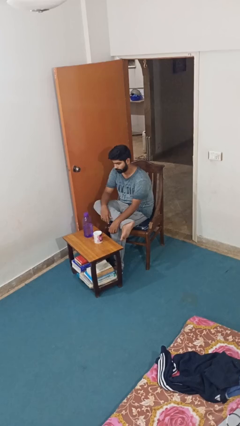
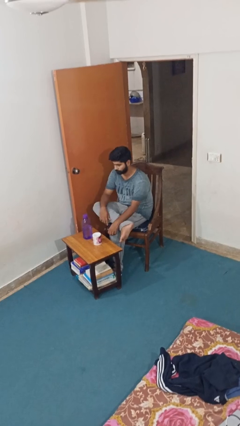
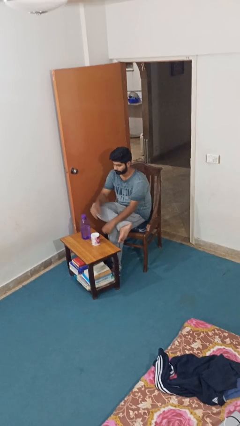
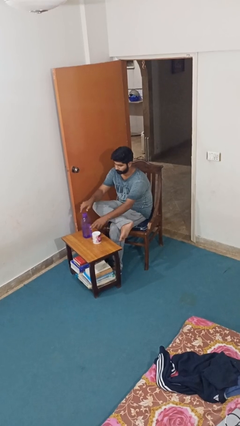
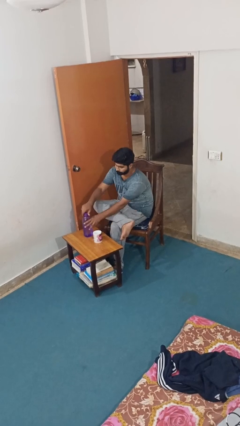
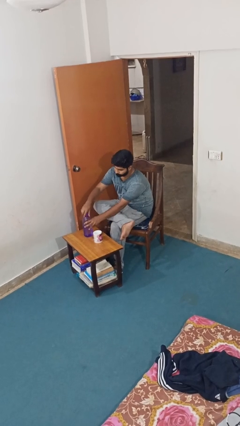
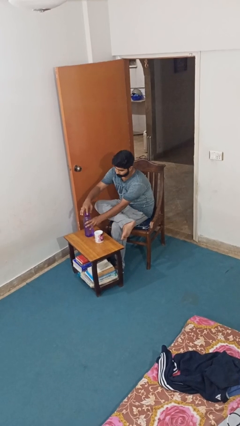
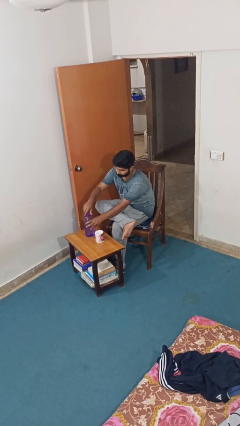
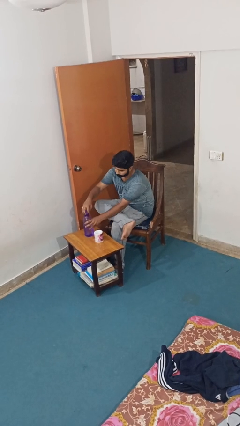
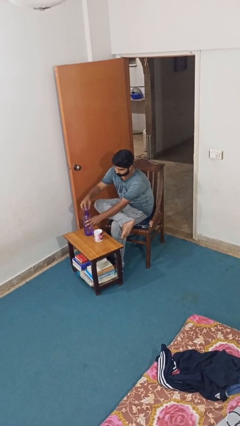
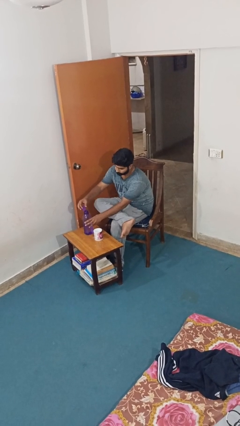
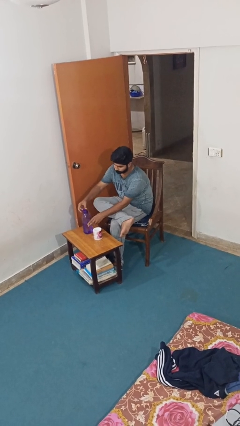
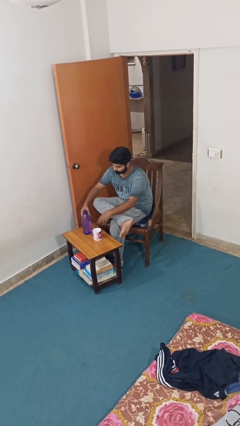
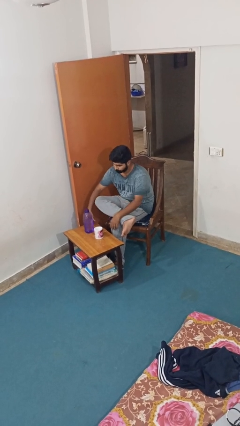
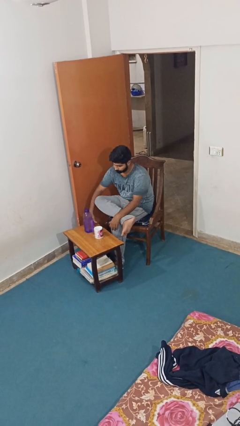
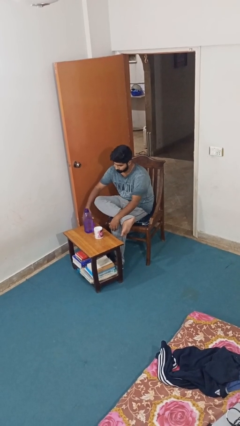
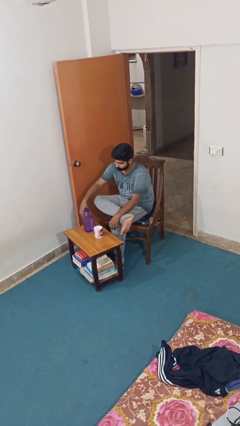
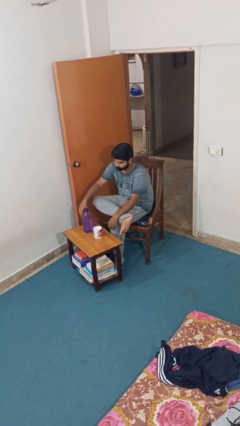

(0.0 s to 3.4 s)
person unscrews lid from bottle

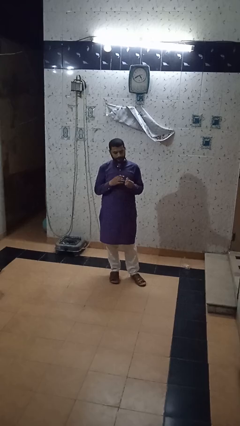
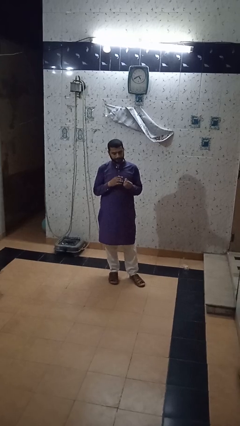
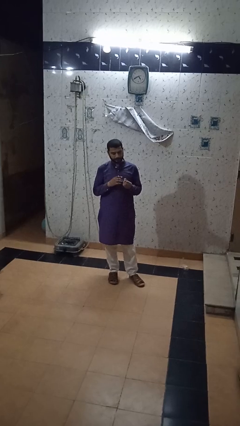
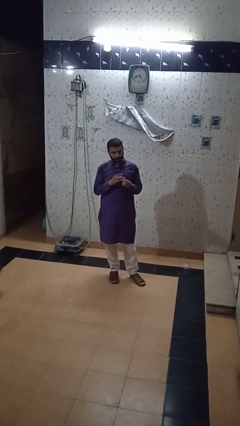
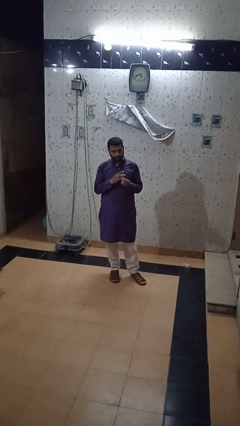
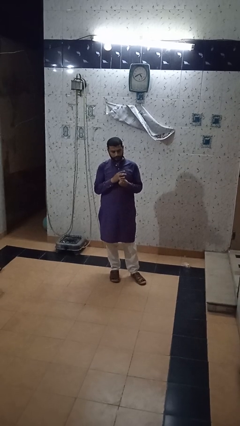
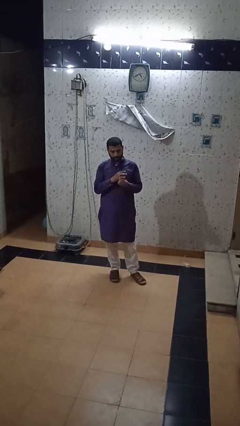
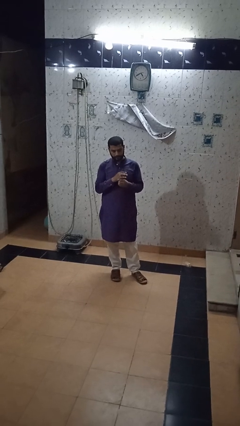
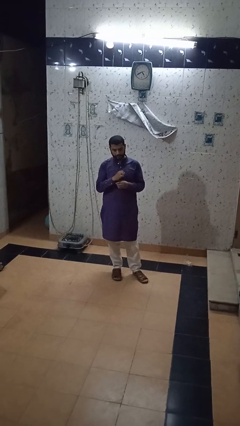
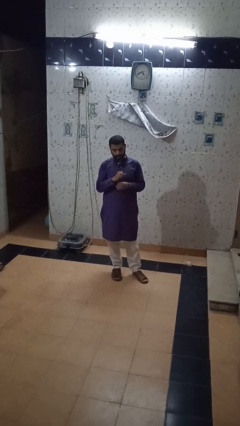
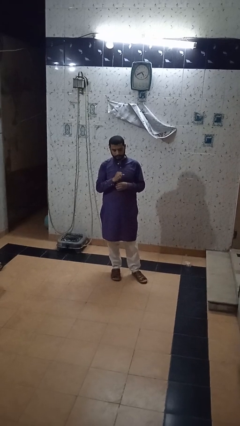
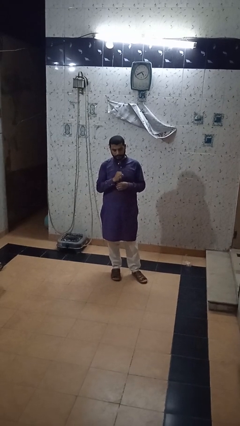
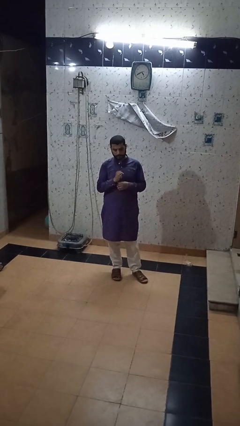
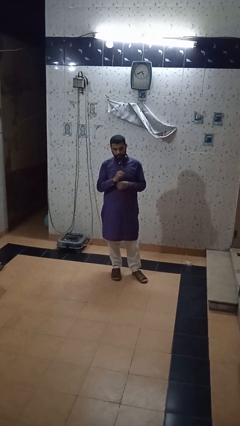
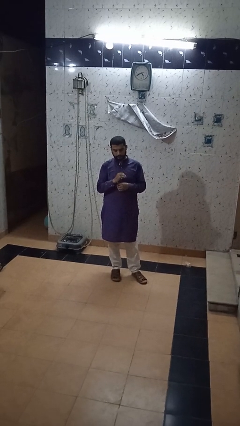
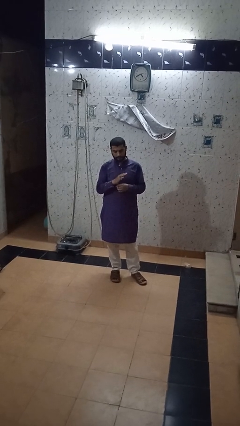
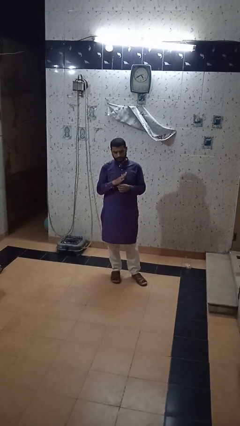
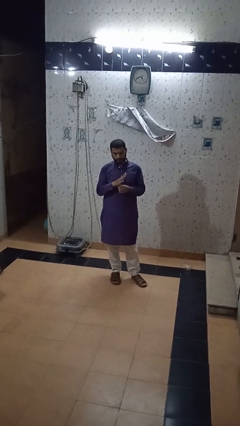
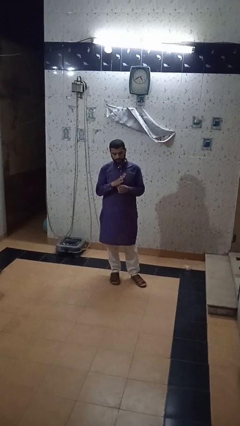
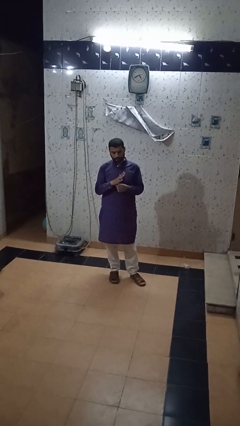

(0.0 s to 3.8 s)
person puts on ring

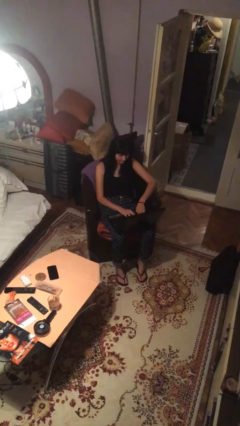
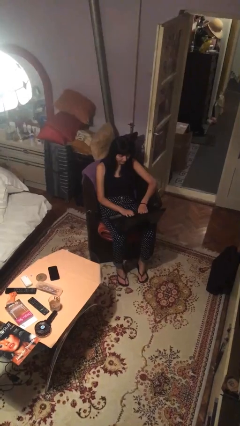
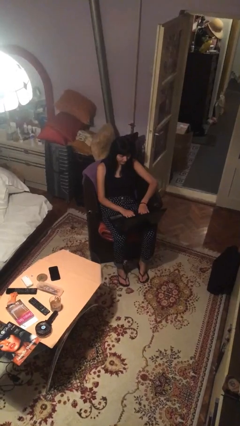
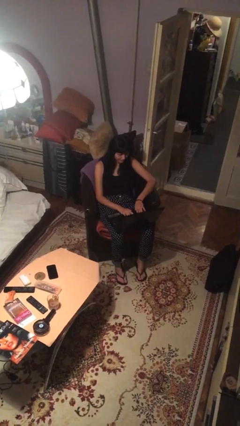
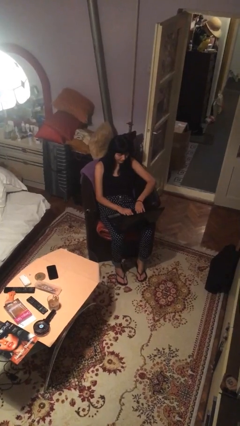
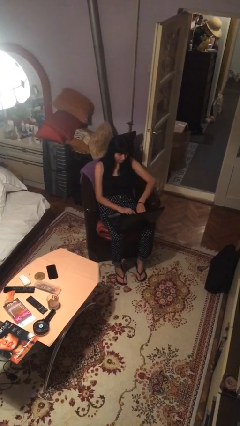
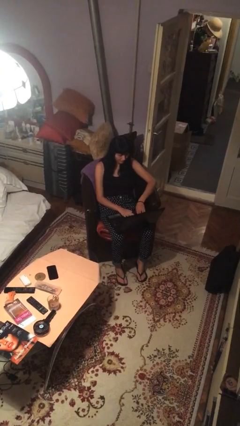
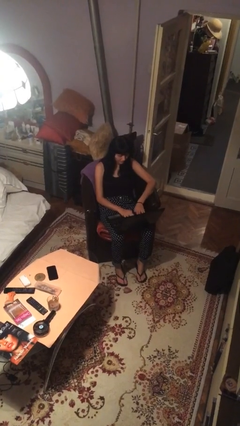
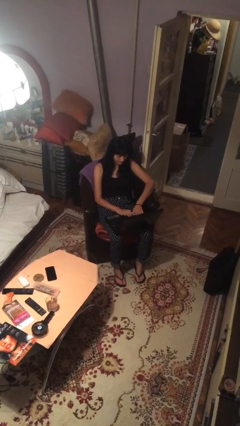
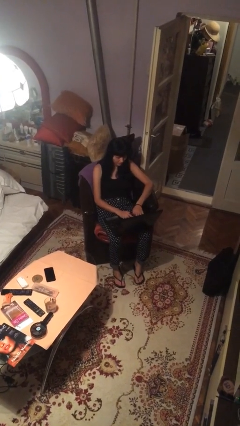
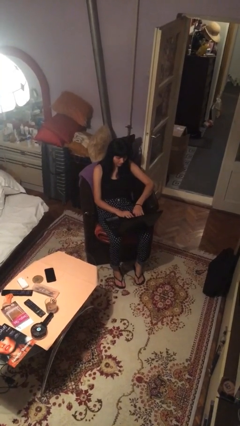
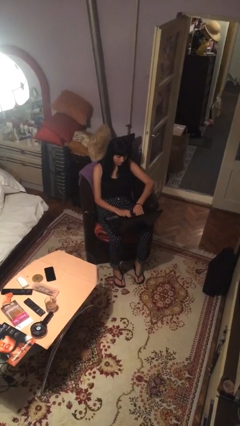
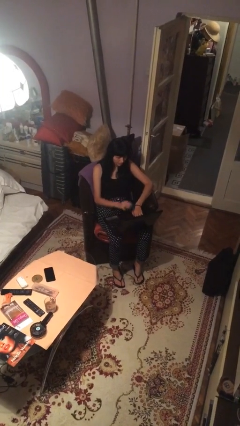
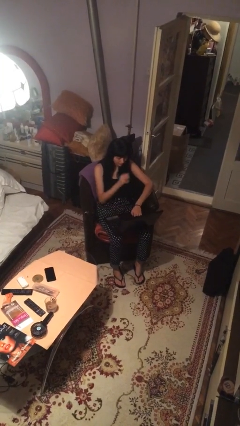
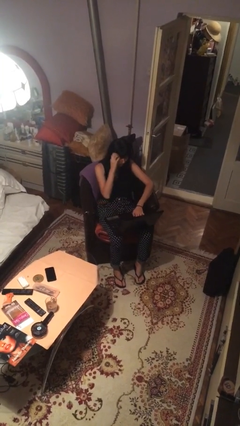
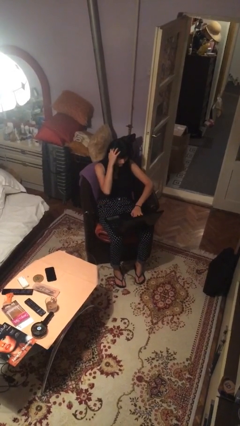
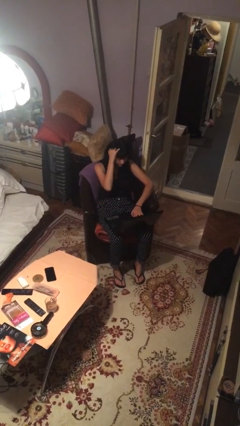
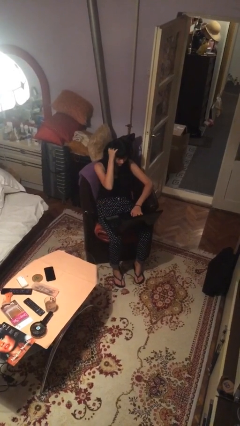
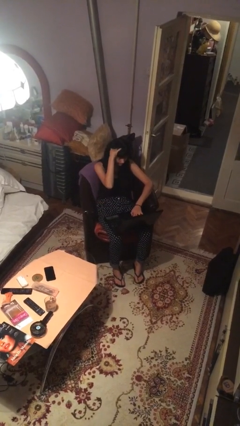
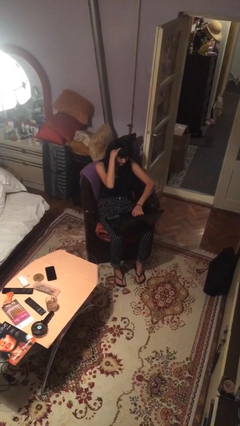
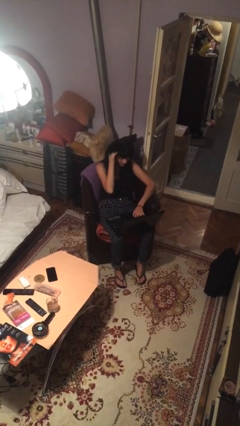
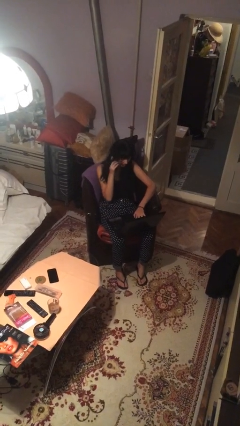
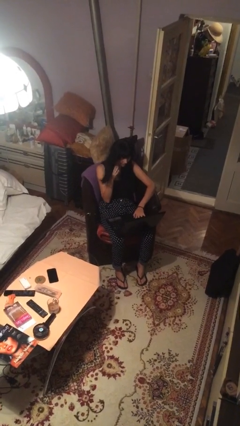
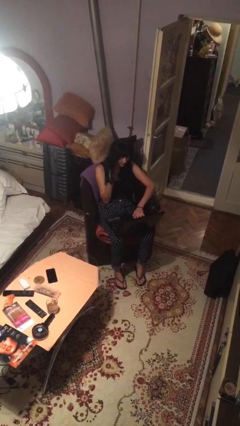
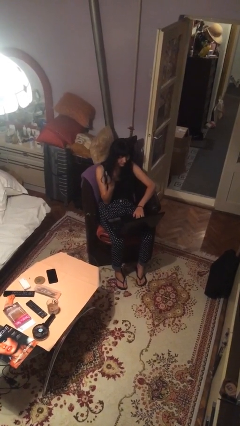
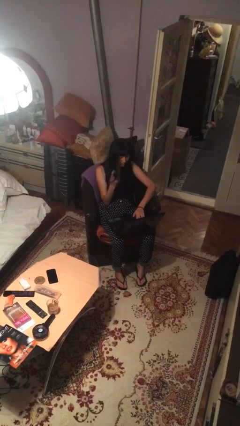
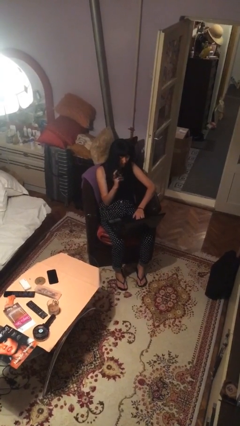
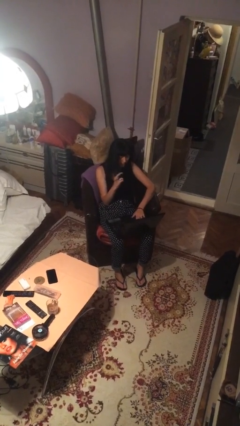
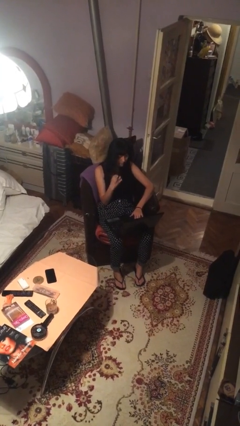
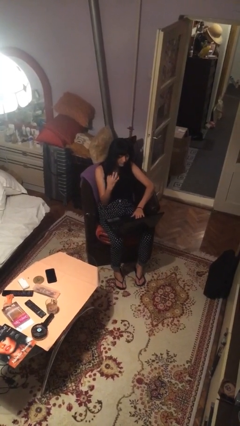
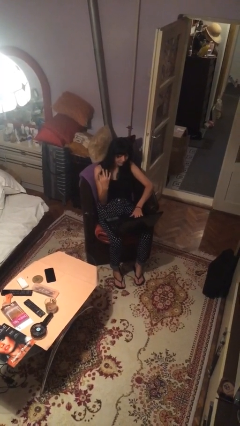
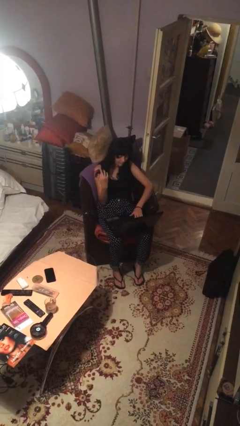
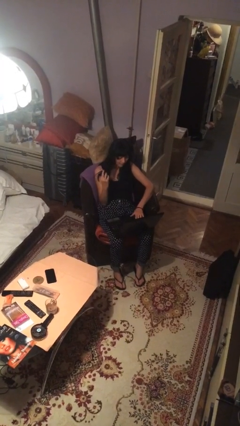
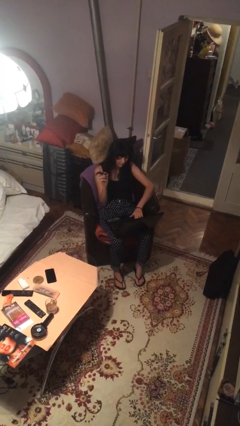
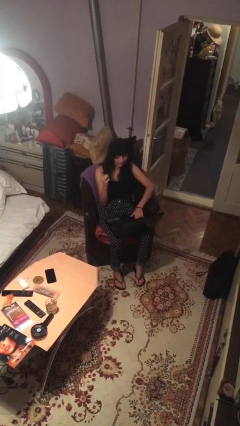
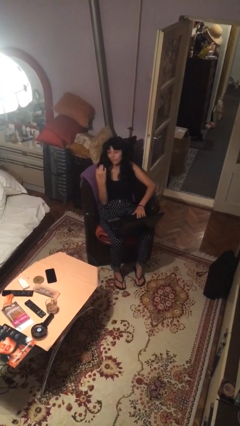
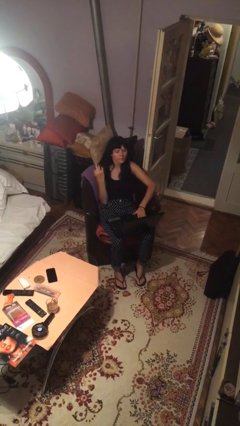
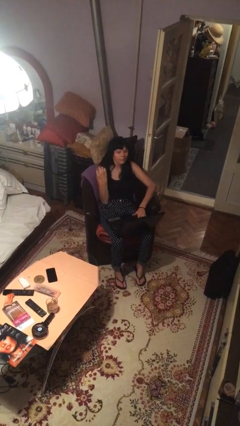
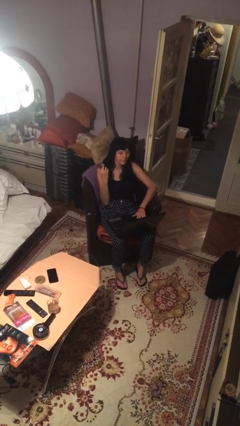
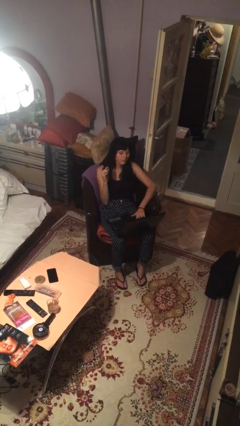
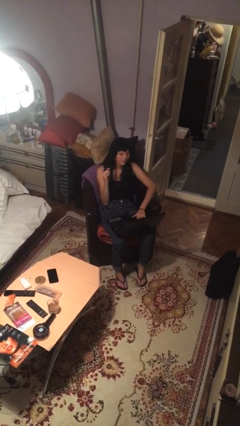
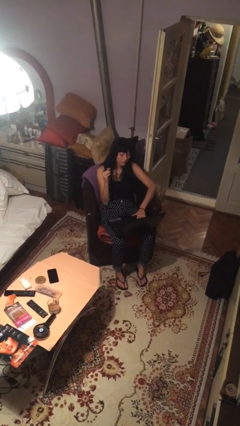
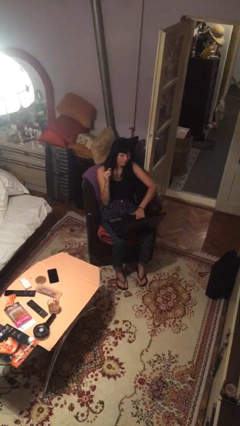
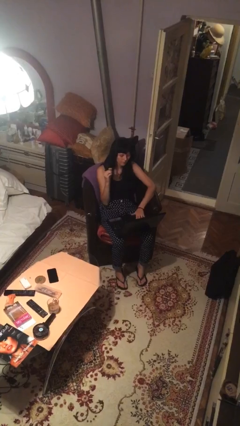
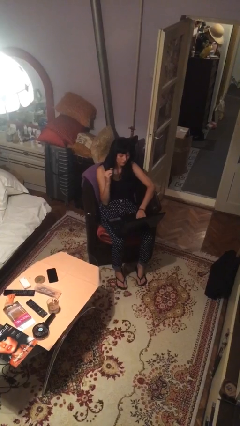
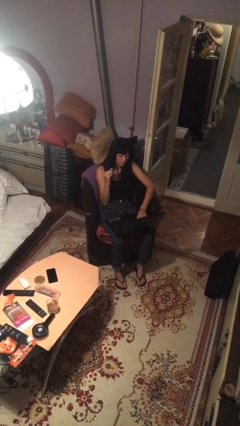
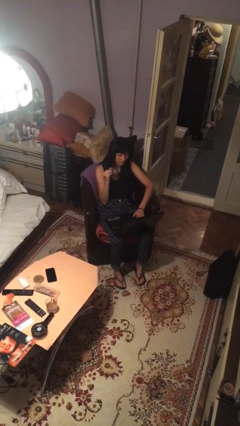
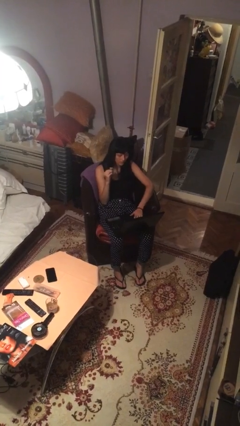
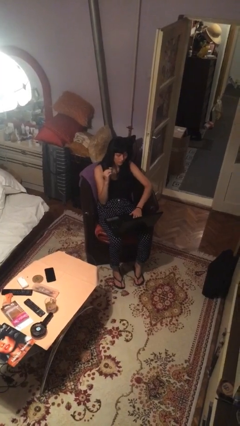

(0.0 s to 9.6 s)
person interacts with laptop

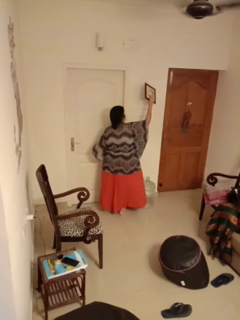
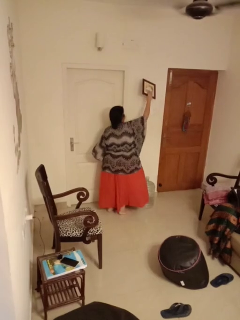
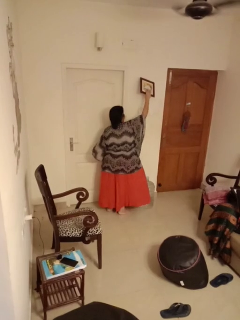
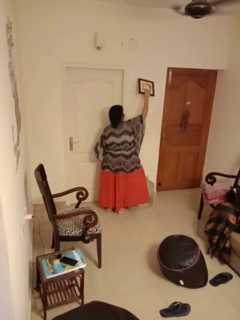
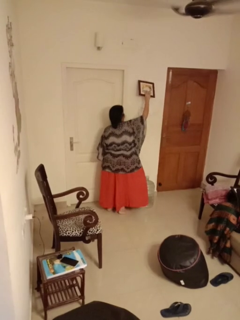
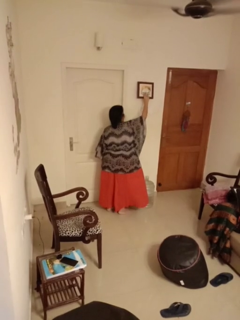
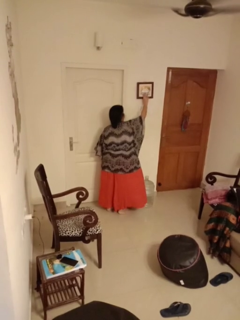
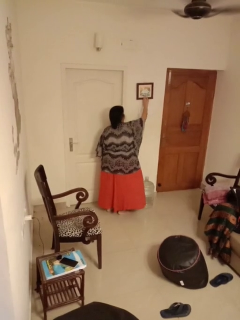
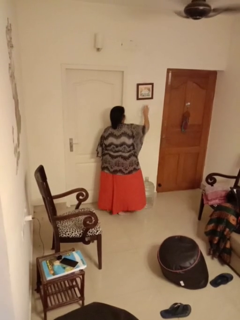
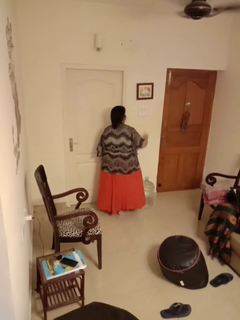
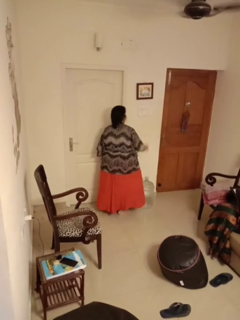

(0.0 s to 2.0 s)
person puts up picture frame
